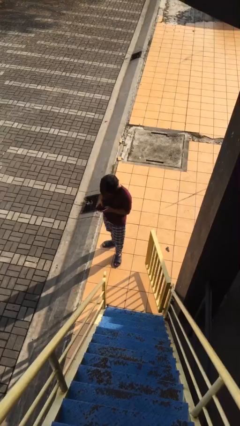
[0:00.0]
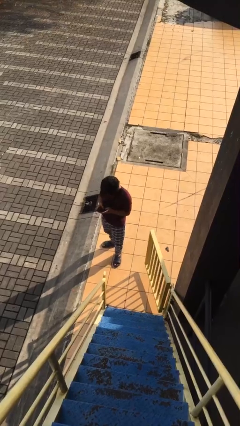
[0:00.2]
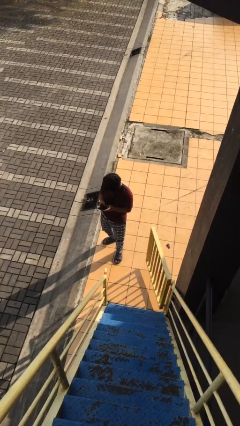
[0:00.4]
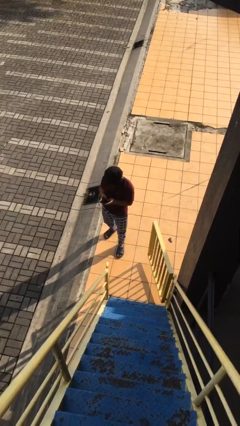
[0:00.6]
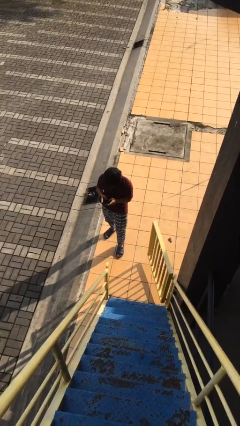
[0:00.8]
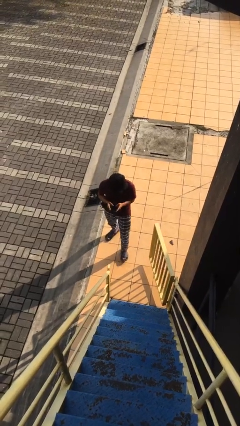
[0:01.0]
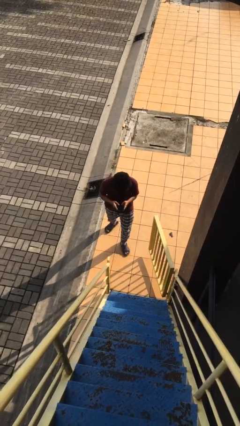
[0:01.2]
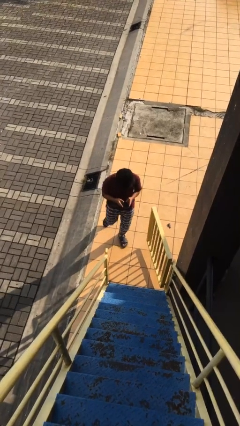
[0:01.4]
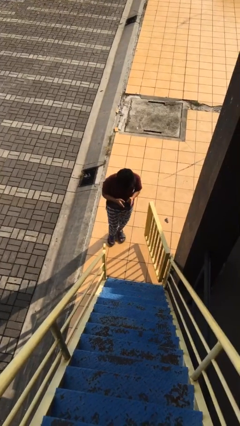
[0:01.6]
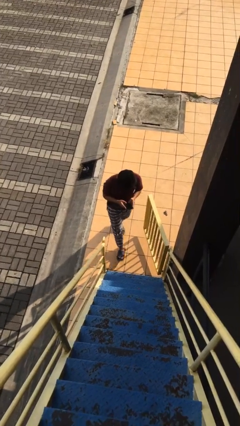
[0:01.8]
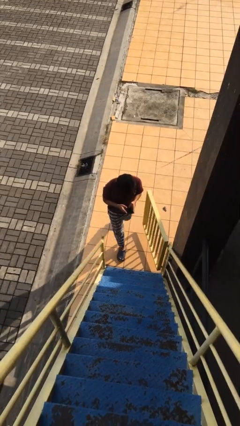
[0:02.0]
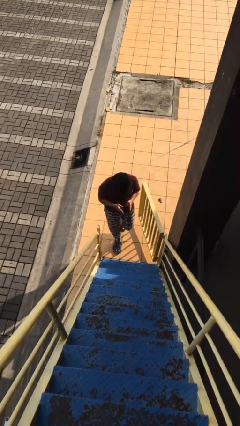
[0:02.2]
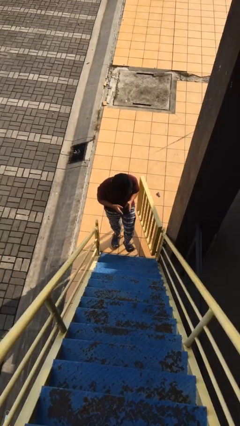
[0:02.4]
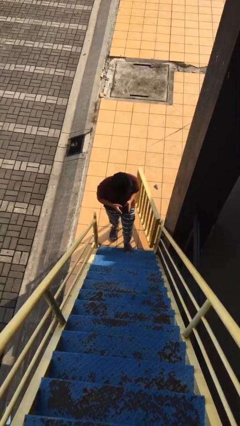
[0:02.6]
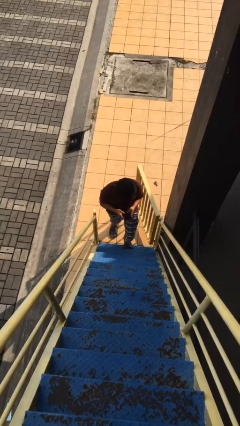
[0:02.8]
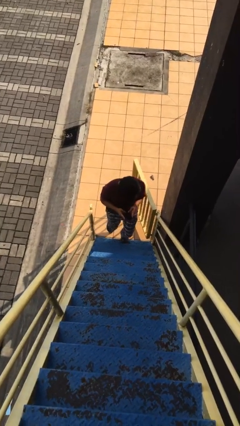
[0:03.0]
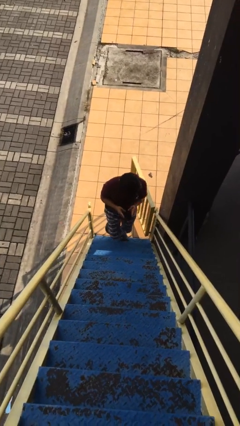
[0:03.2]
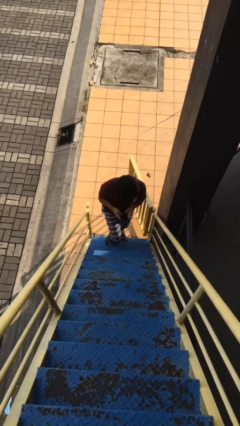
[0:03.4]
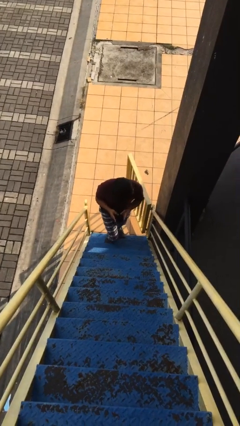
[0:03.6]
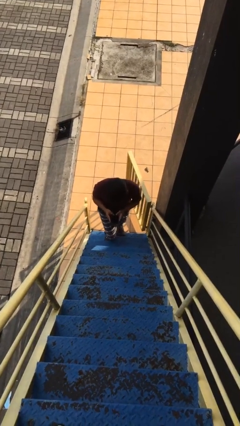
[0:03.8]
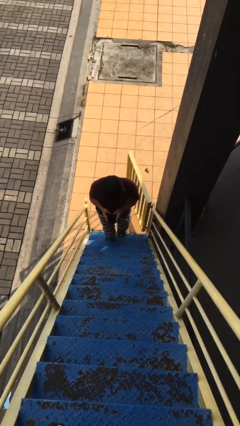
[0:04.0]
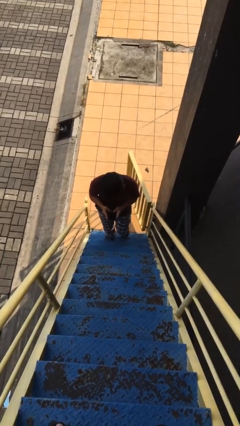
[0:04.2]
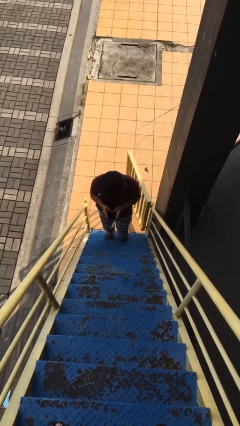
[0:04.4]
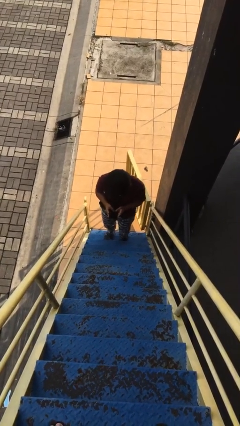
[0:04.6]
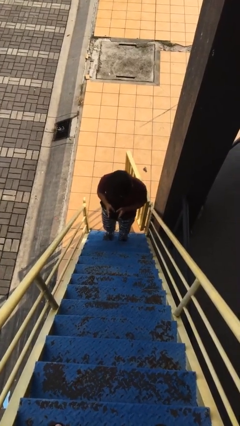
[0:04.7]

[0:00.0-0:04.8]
person enters scene through structure

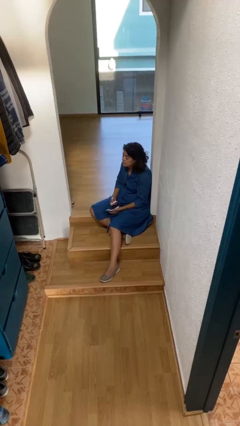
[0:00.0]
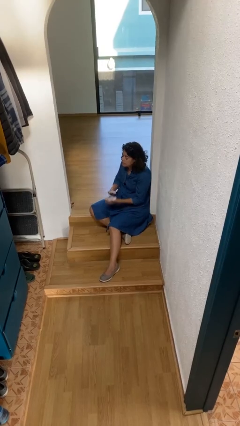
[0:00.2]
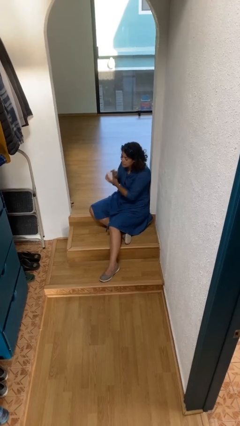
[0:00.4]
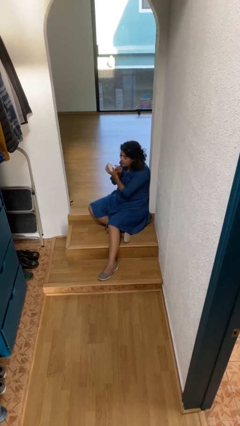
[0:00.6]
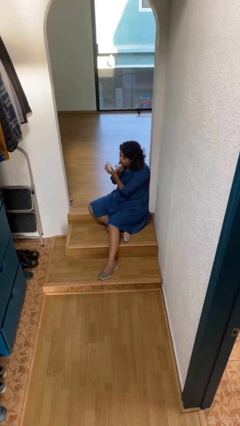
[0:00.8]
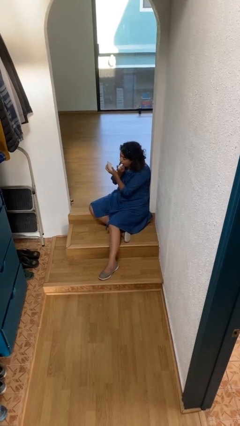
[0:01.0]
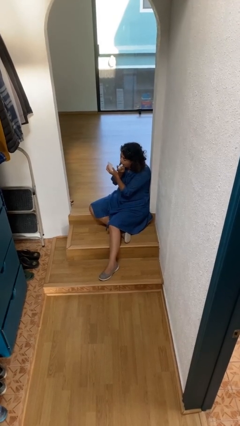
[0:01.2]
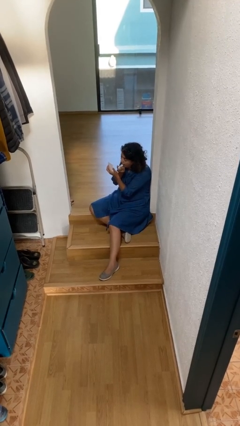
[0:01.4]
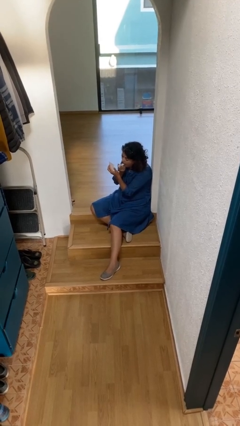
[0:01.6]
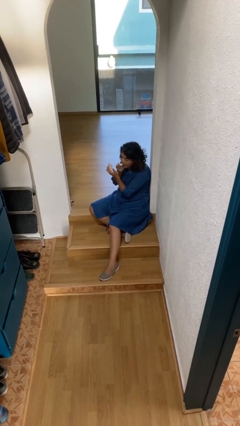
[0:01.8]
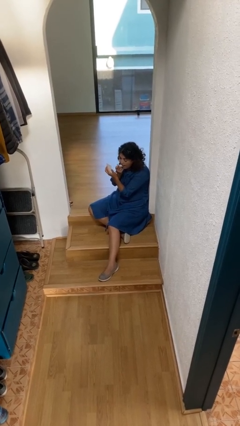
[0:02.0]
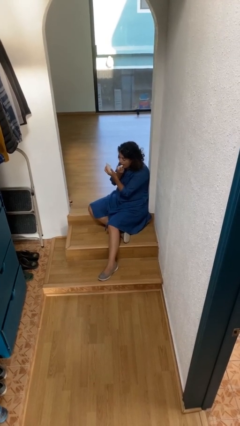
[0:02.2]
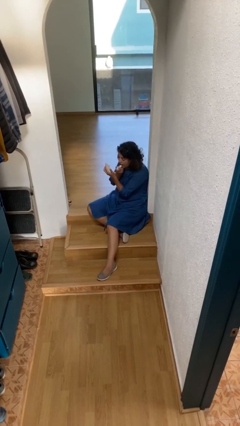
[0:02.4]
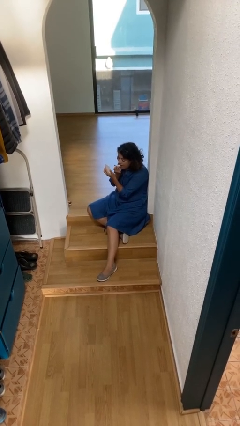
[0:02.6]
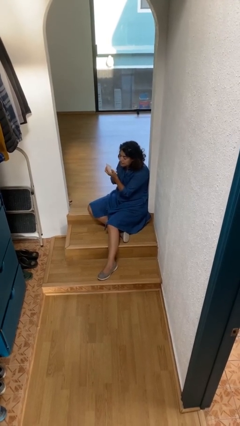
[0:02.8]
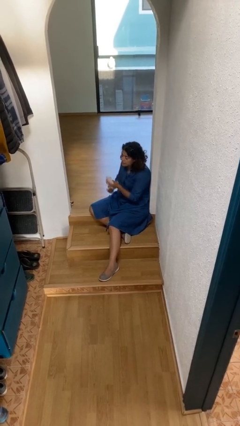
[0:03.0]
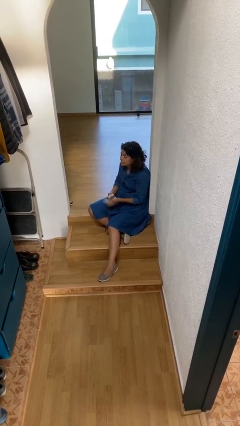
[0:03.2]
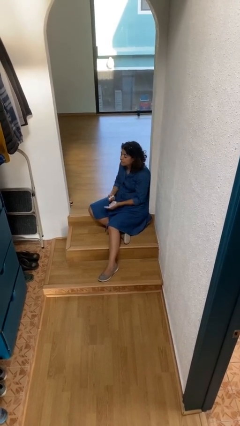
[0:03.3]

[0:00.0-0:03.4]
person applies lip makeup

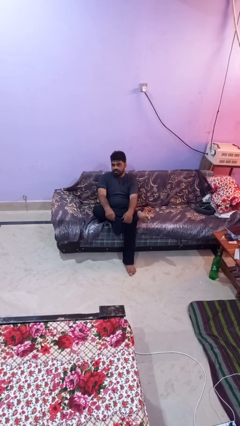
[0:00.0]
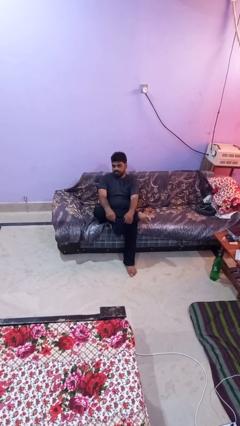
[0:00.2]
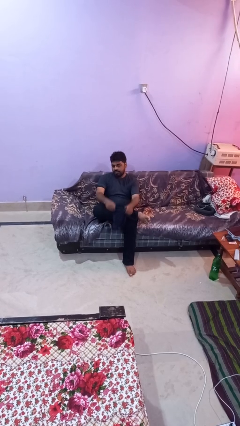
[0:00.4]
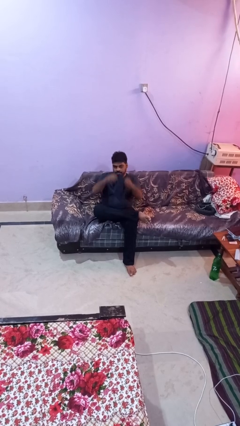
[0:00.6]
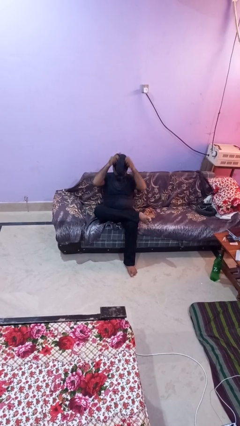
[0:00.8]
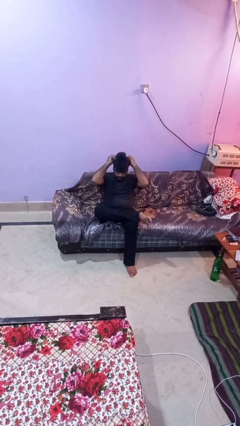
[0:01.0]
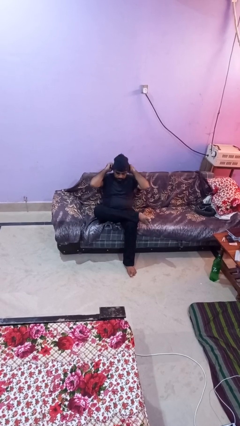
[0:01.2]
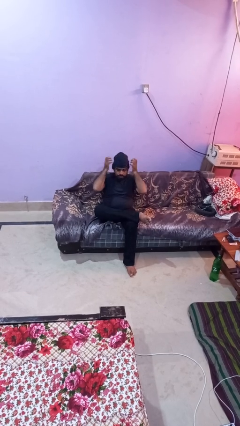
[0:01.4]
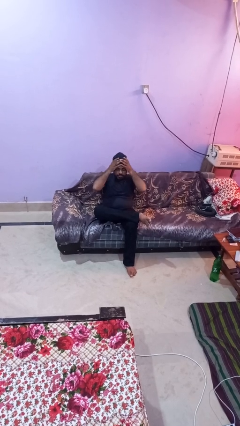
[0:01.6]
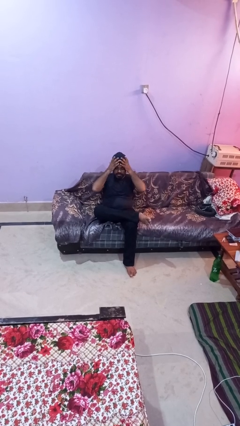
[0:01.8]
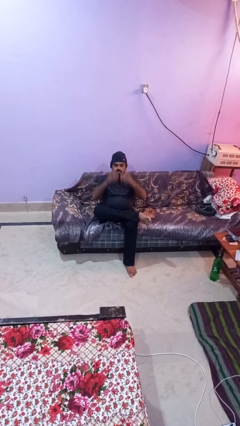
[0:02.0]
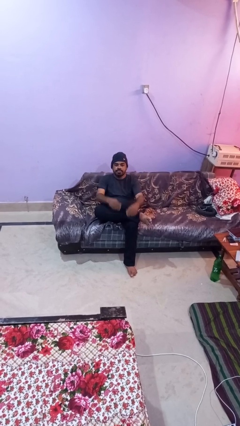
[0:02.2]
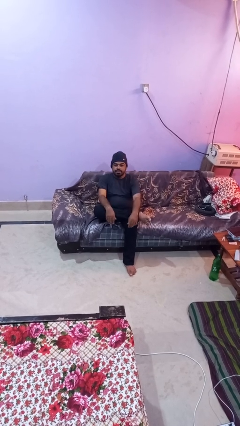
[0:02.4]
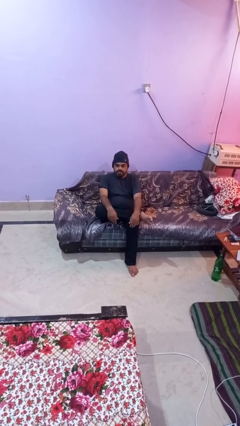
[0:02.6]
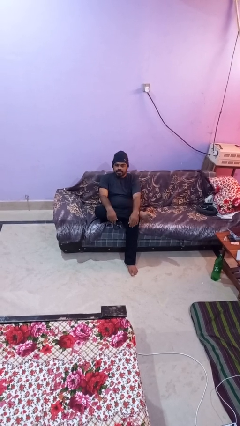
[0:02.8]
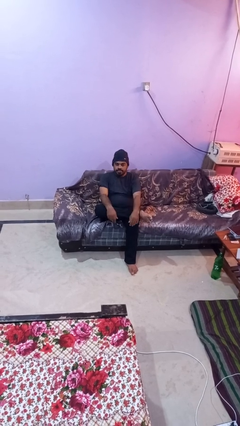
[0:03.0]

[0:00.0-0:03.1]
person puts on hat

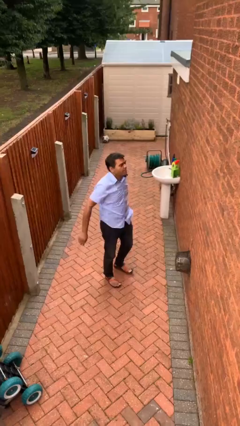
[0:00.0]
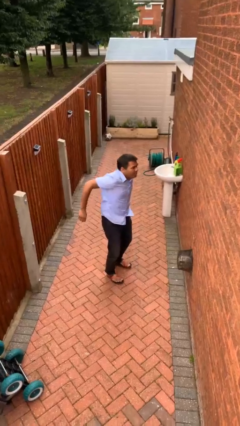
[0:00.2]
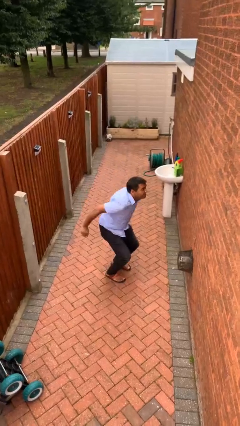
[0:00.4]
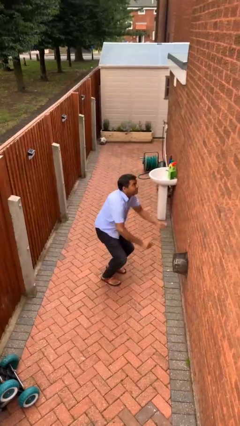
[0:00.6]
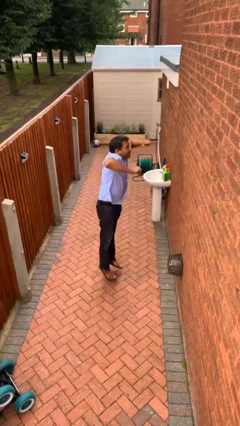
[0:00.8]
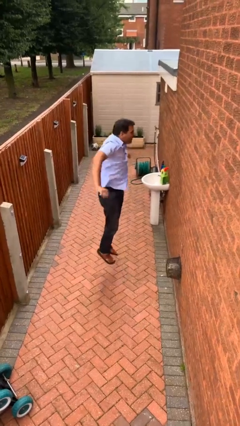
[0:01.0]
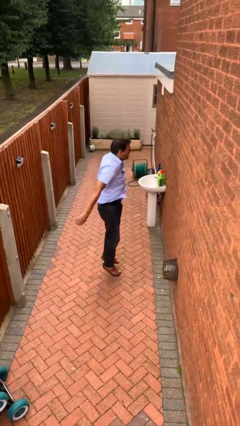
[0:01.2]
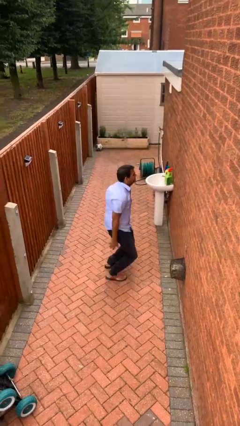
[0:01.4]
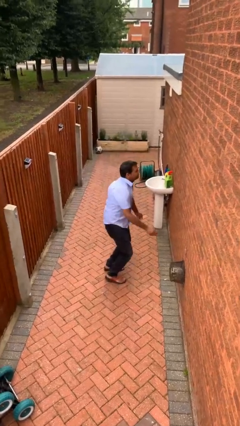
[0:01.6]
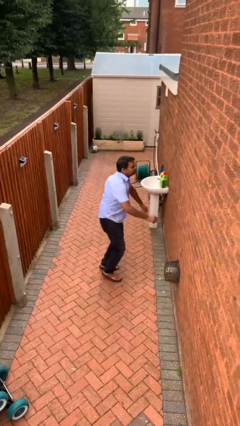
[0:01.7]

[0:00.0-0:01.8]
person jumps

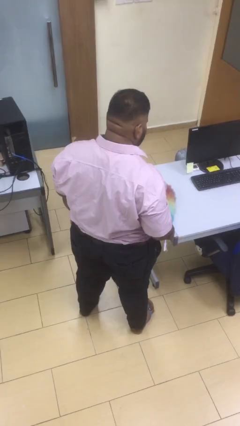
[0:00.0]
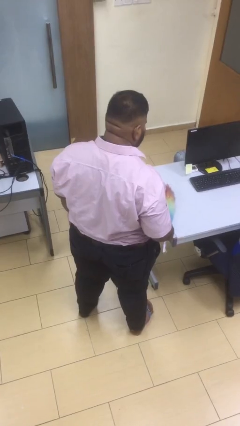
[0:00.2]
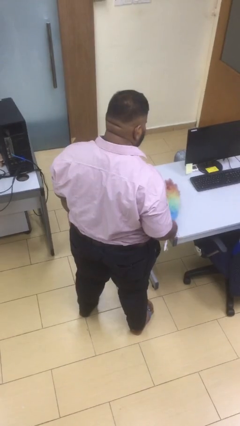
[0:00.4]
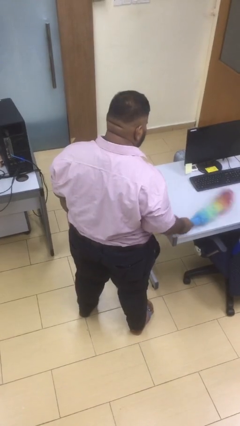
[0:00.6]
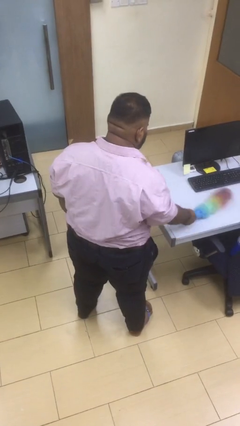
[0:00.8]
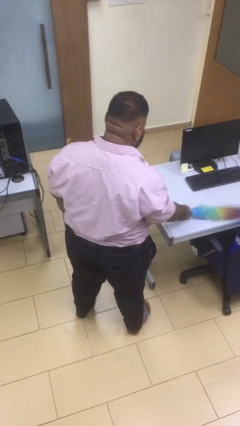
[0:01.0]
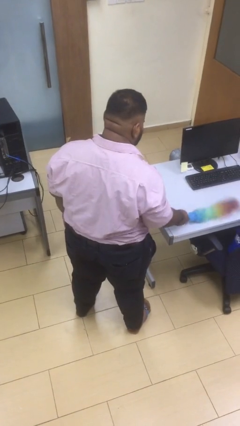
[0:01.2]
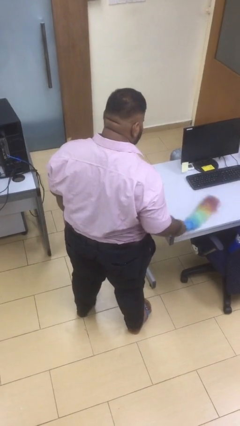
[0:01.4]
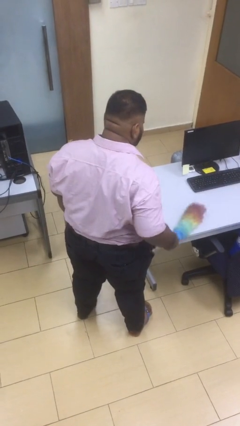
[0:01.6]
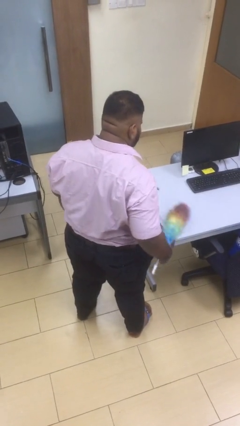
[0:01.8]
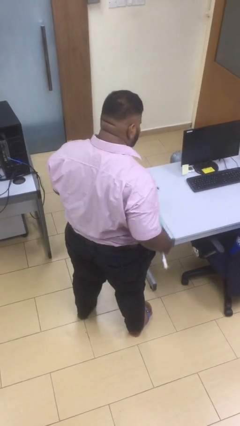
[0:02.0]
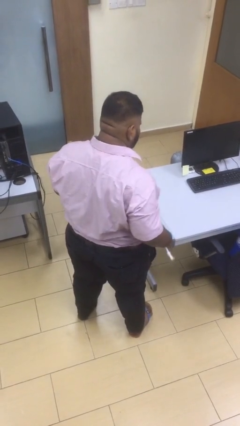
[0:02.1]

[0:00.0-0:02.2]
person dusts furniture

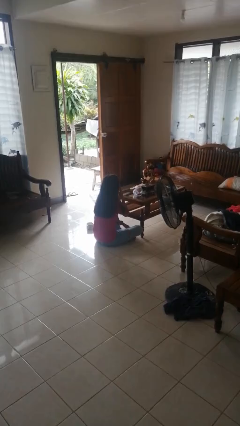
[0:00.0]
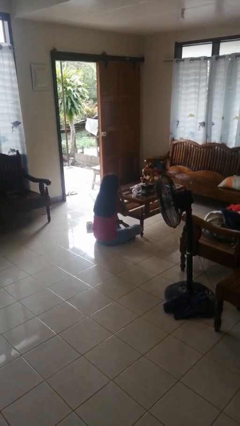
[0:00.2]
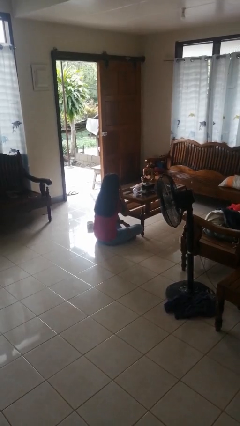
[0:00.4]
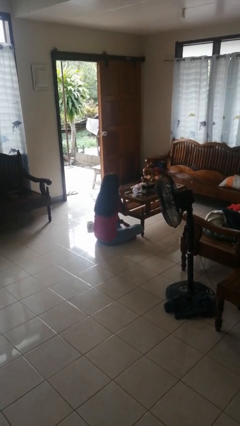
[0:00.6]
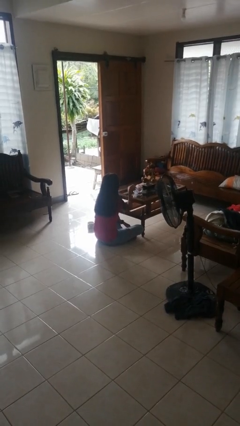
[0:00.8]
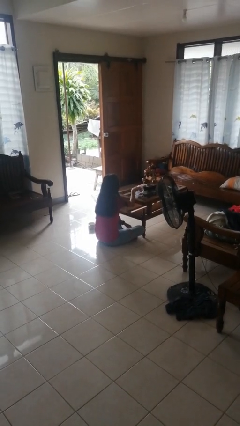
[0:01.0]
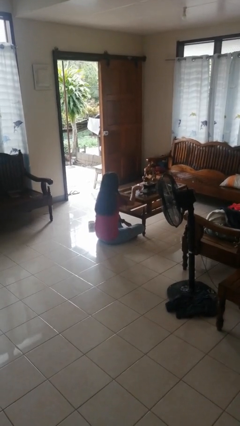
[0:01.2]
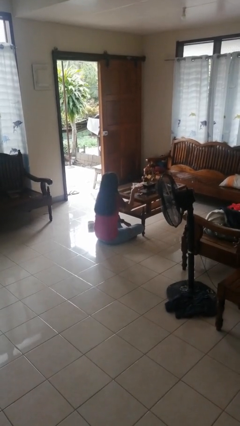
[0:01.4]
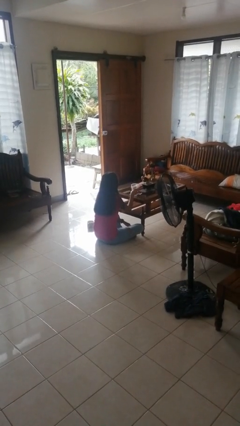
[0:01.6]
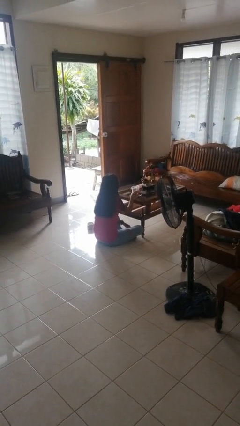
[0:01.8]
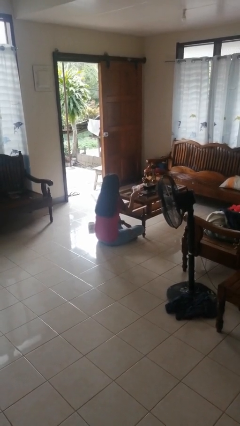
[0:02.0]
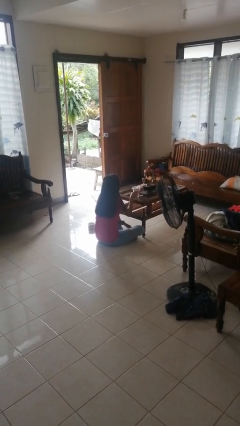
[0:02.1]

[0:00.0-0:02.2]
person sets upright glass
